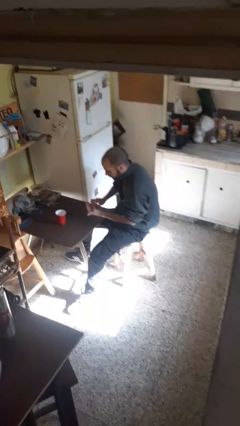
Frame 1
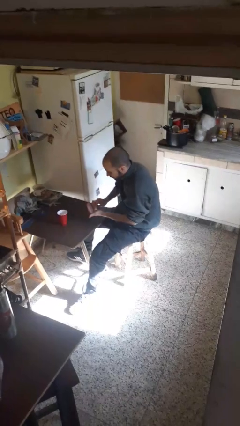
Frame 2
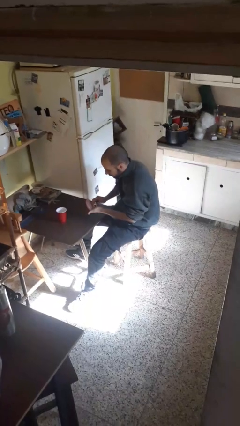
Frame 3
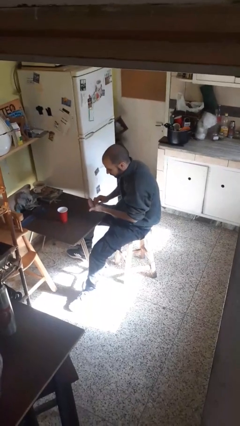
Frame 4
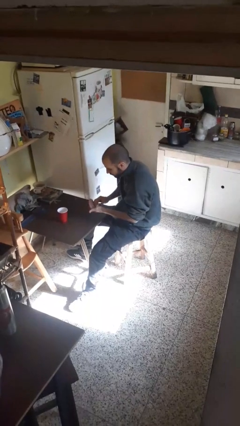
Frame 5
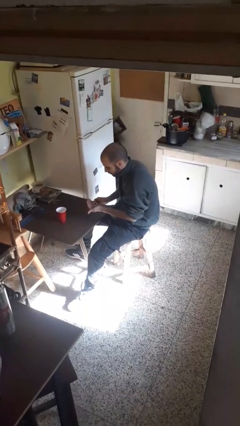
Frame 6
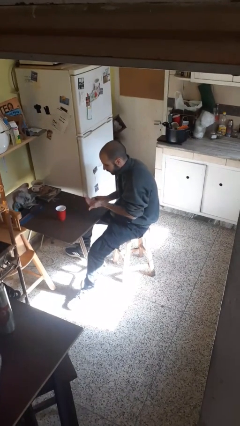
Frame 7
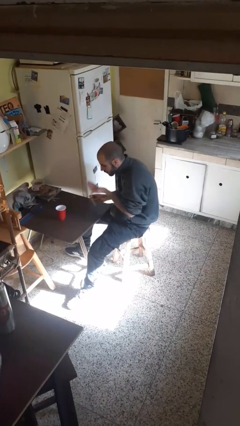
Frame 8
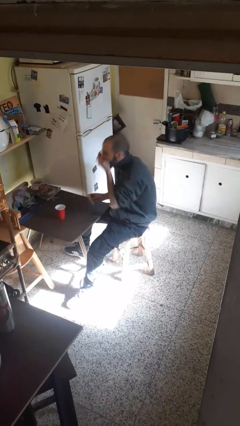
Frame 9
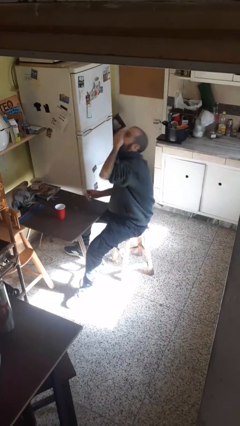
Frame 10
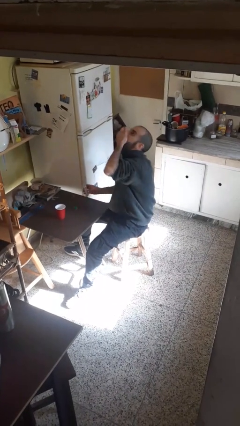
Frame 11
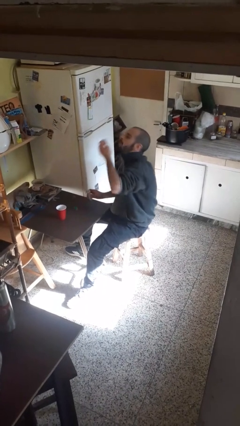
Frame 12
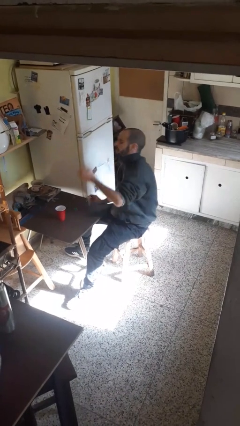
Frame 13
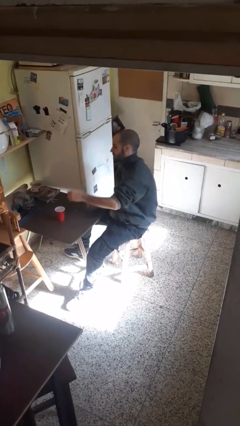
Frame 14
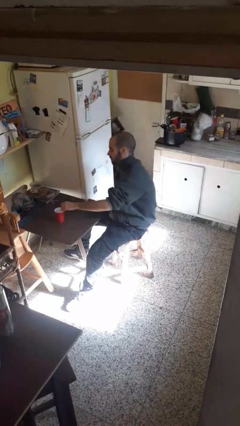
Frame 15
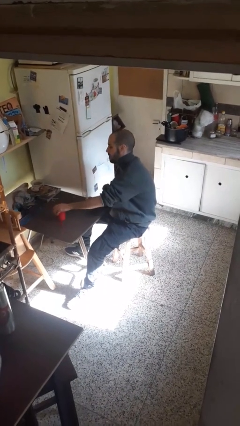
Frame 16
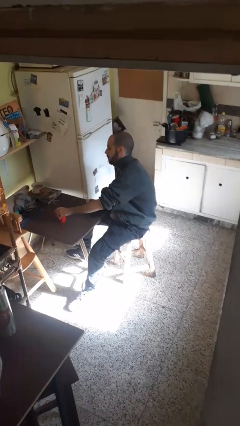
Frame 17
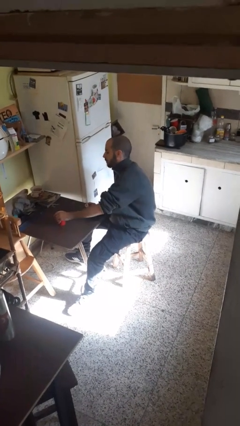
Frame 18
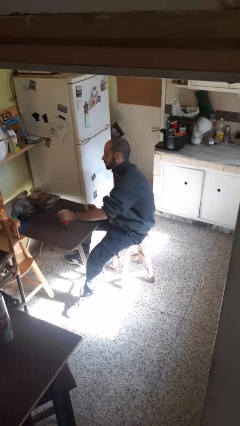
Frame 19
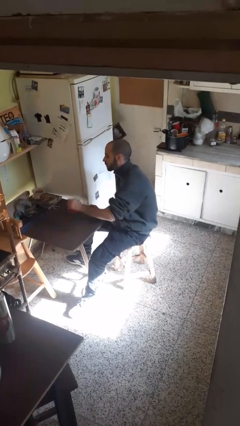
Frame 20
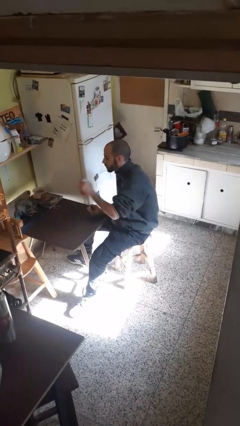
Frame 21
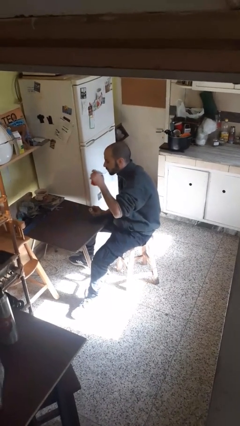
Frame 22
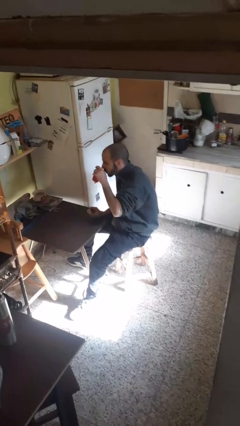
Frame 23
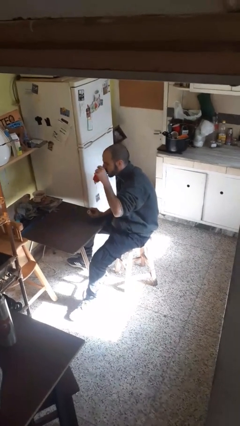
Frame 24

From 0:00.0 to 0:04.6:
person takes medicine pills

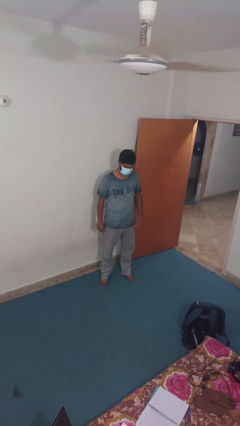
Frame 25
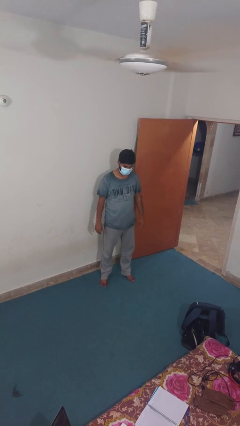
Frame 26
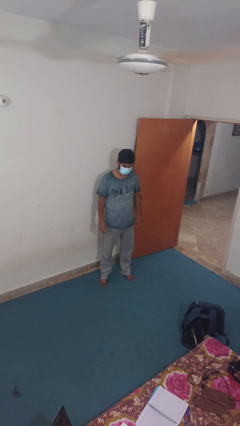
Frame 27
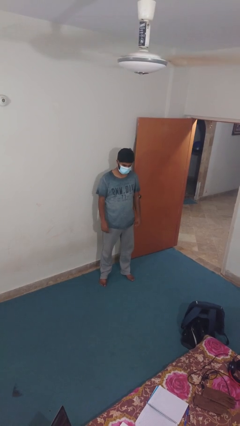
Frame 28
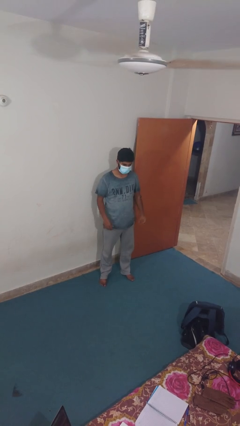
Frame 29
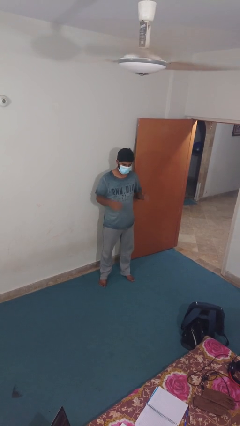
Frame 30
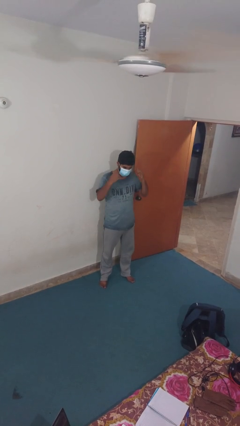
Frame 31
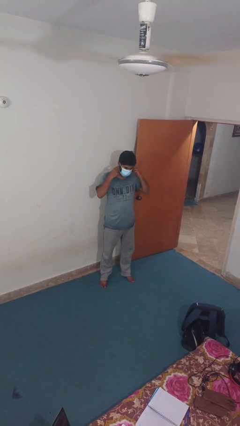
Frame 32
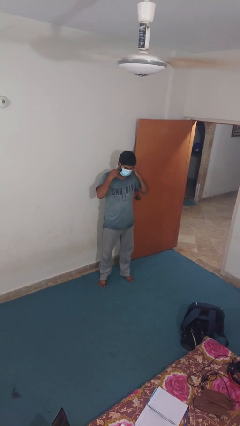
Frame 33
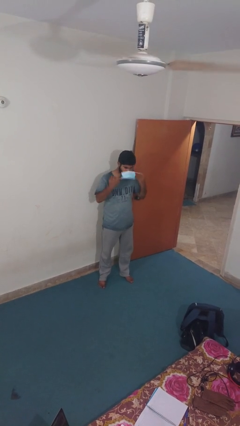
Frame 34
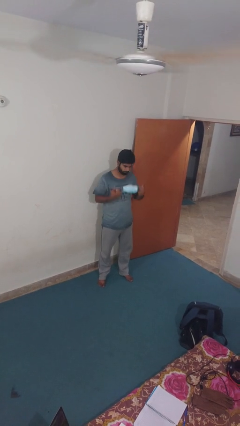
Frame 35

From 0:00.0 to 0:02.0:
person takes off facemask

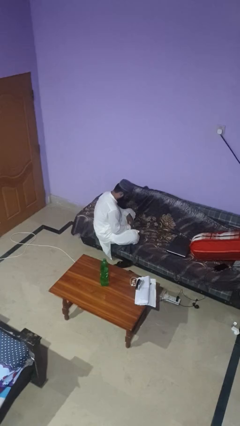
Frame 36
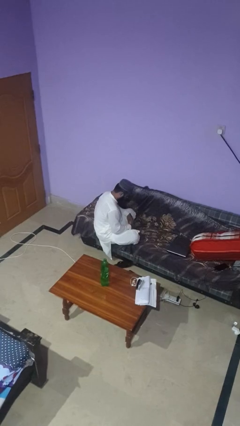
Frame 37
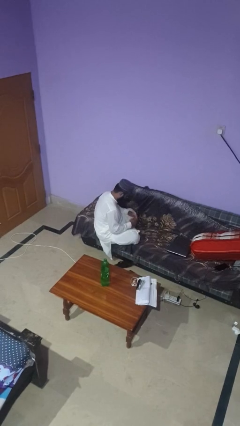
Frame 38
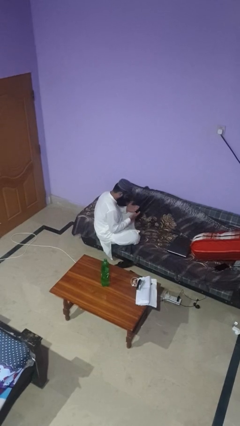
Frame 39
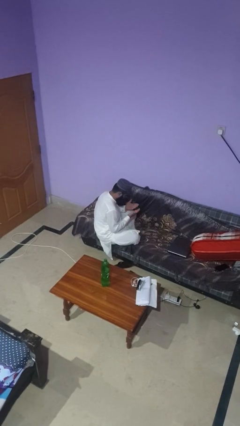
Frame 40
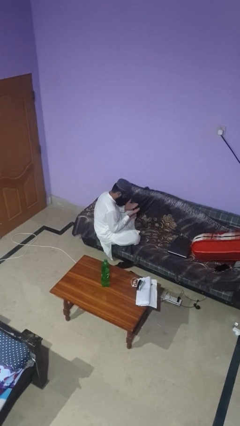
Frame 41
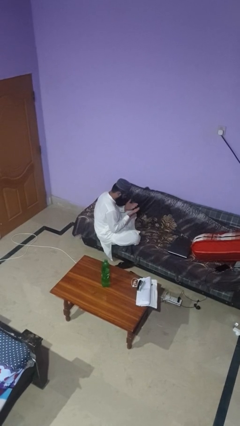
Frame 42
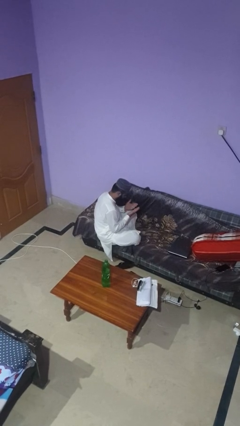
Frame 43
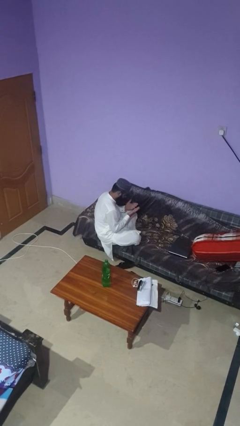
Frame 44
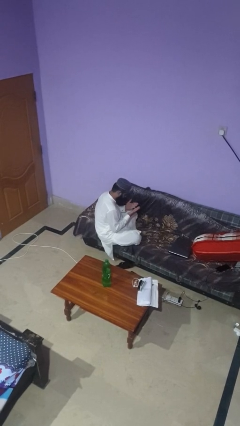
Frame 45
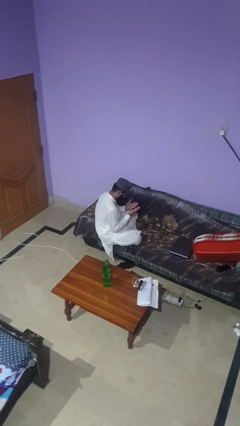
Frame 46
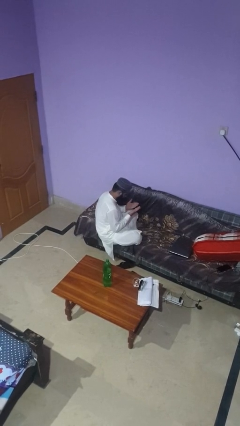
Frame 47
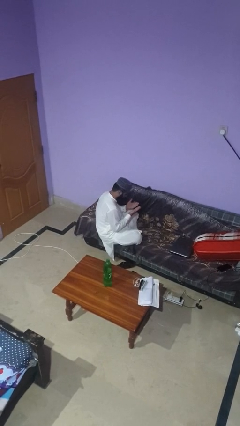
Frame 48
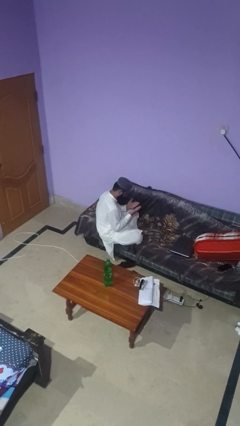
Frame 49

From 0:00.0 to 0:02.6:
person looks at hands in lap

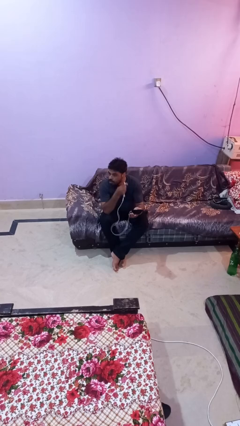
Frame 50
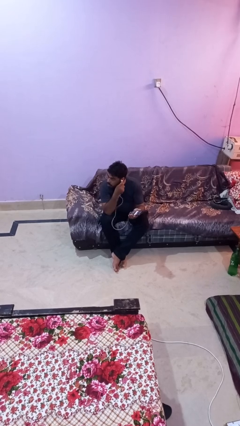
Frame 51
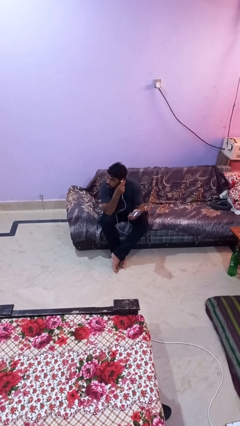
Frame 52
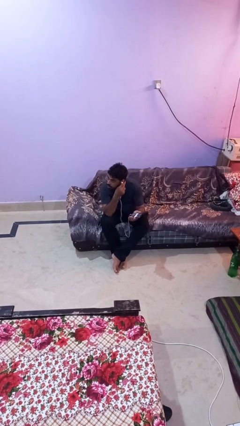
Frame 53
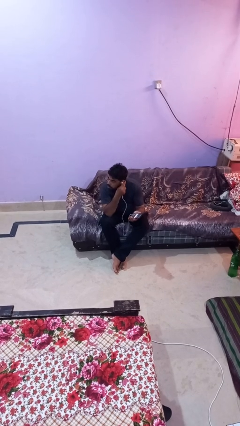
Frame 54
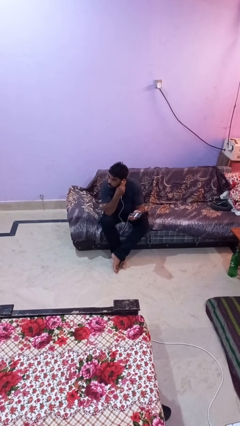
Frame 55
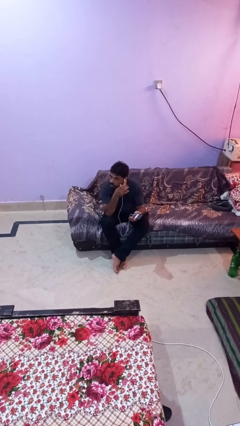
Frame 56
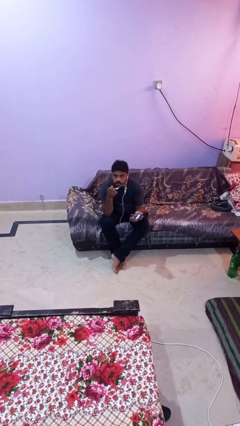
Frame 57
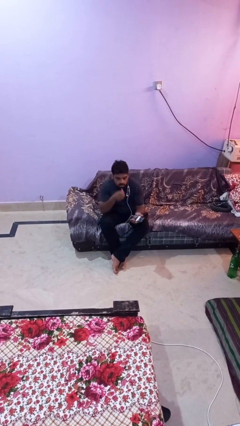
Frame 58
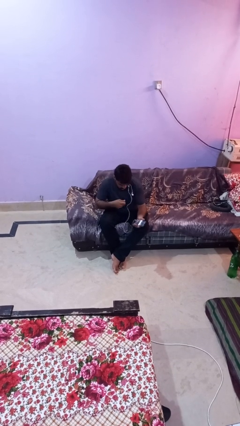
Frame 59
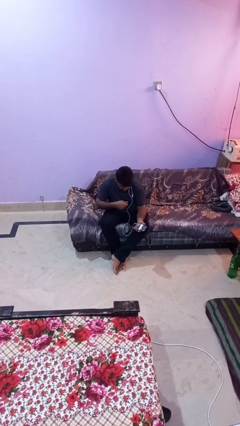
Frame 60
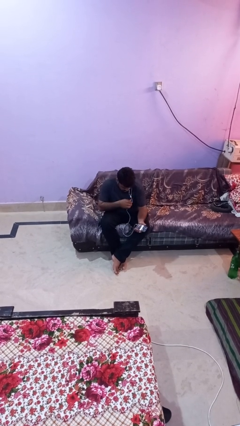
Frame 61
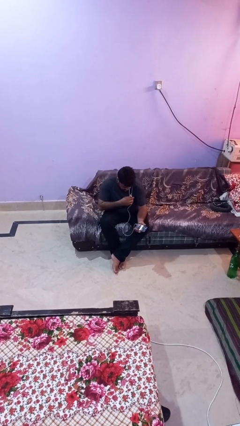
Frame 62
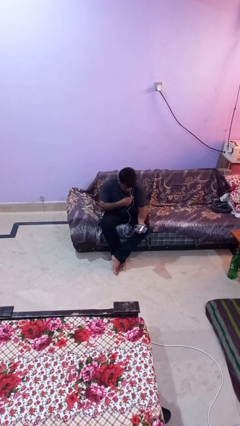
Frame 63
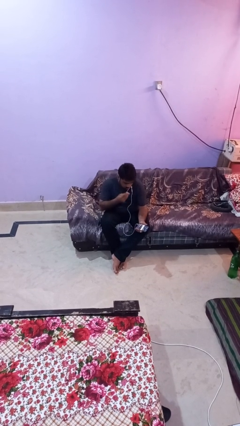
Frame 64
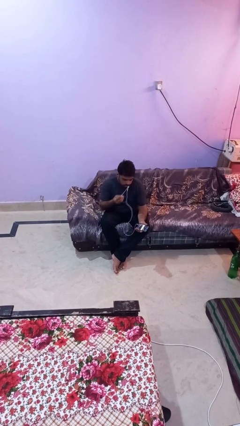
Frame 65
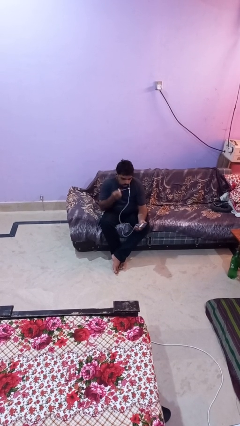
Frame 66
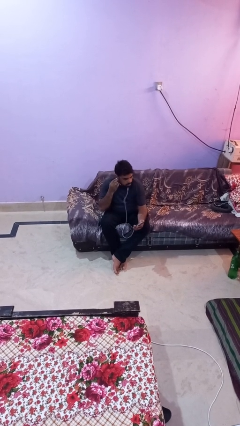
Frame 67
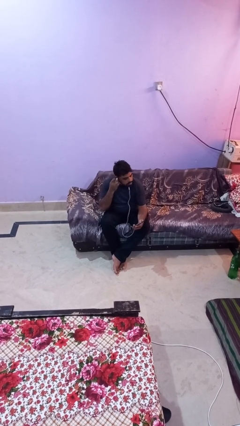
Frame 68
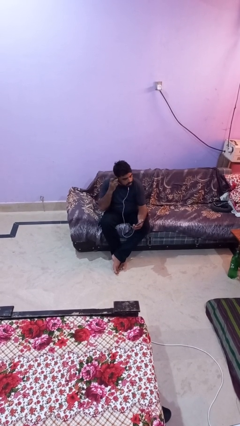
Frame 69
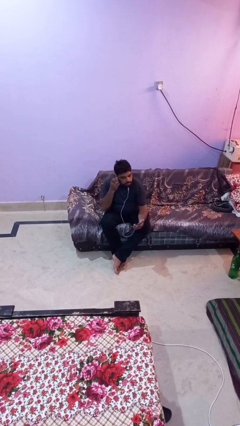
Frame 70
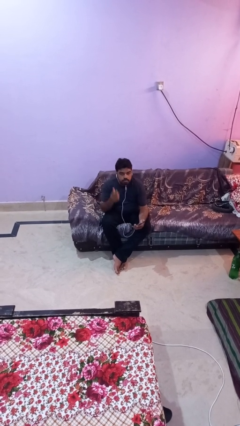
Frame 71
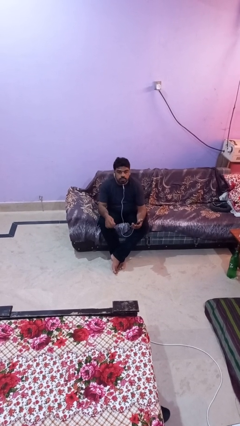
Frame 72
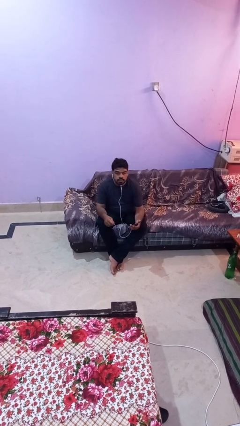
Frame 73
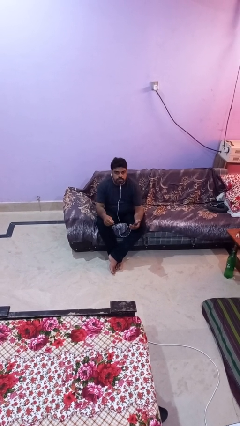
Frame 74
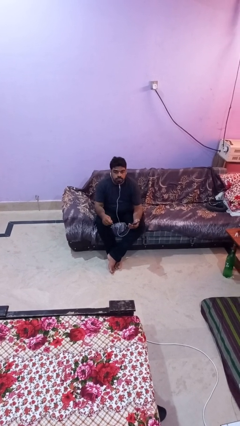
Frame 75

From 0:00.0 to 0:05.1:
person puts on headphones

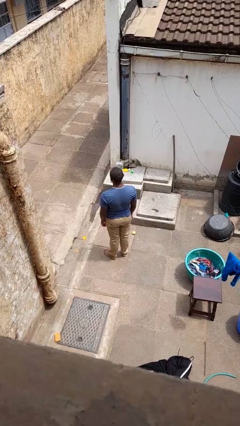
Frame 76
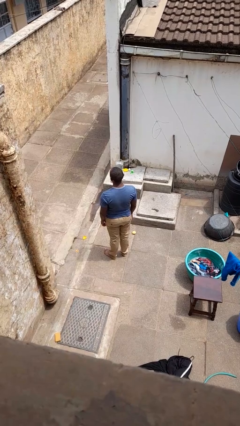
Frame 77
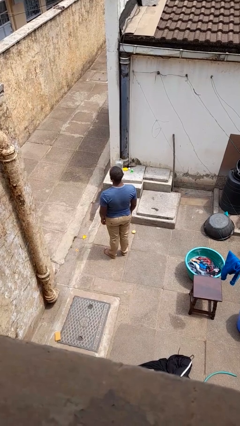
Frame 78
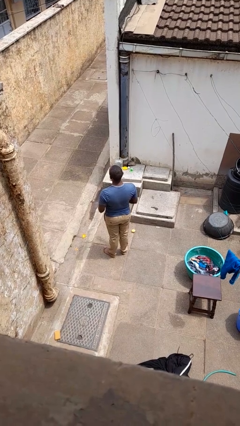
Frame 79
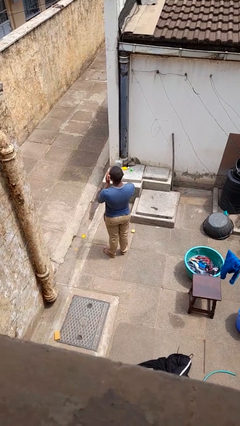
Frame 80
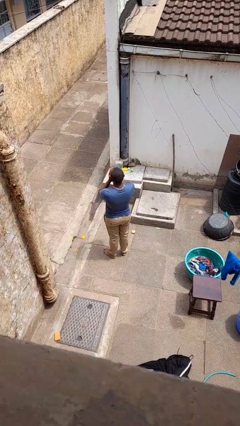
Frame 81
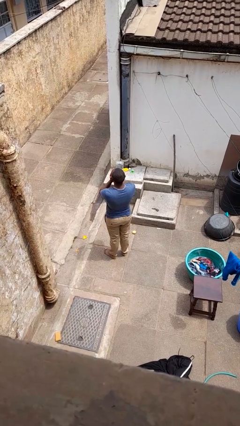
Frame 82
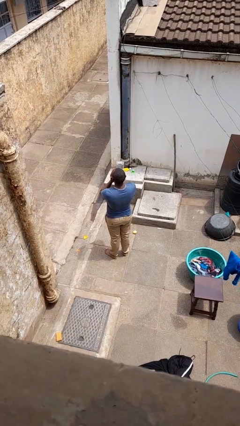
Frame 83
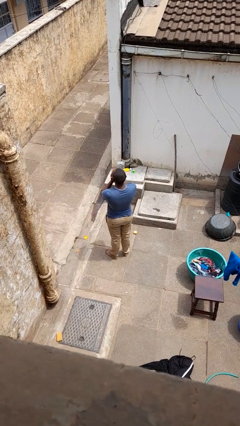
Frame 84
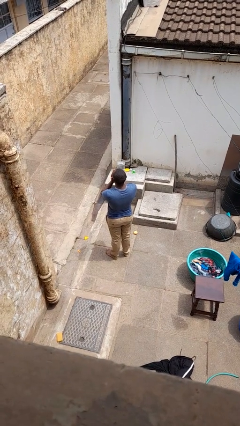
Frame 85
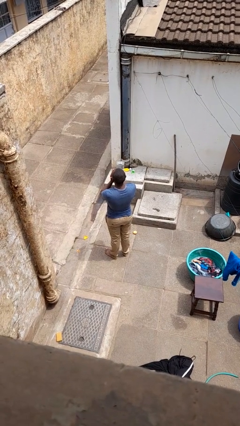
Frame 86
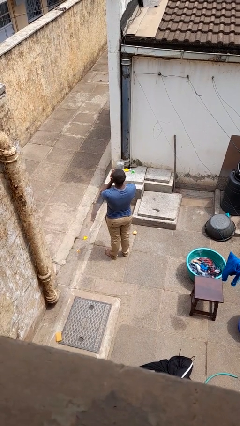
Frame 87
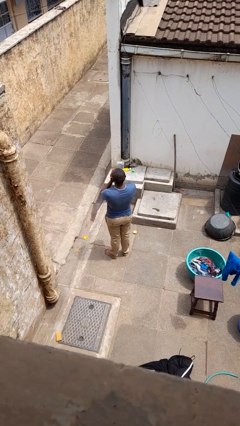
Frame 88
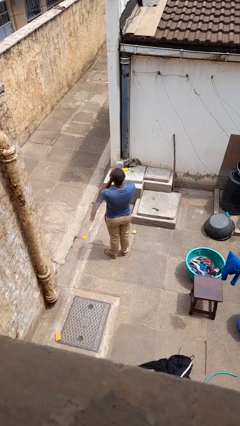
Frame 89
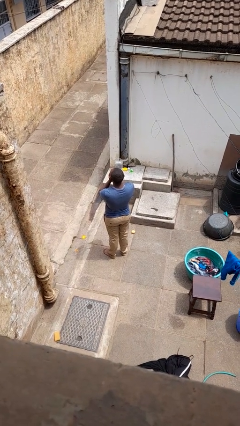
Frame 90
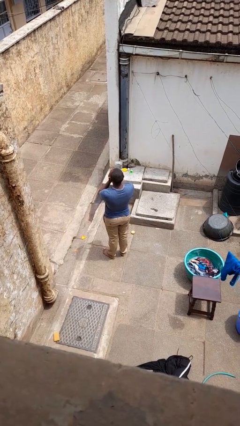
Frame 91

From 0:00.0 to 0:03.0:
person blows into hands
